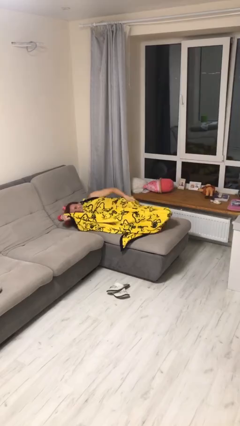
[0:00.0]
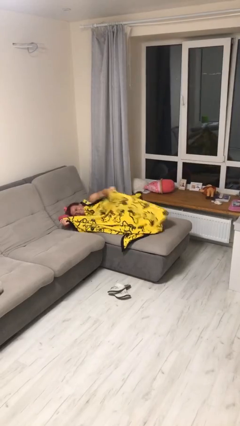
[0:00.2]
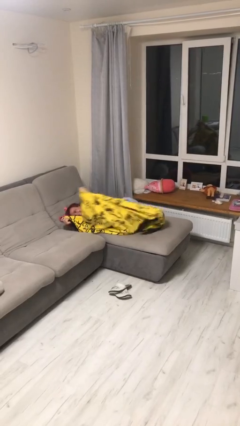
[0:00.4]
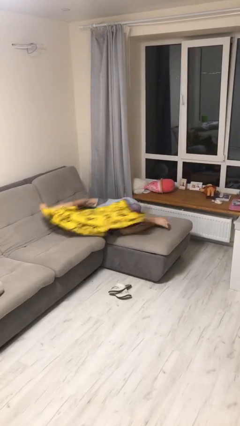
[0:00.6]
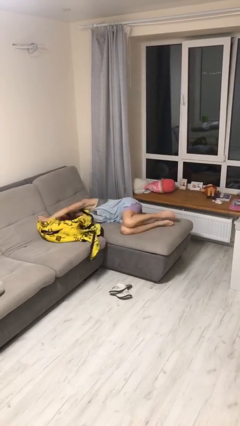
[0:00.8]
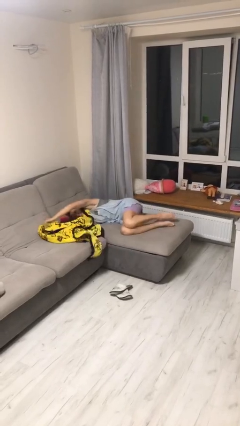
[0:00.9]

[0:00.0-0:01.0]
person uncovers with bedsheets

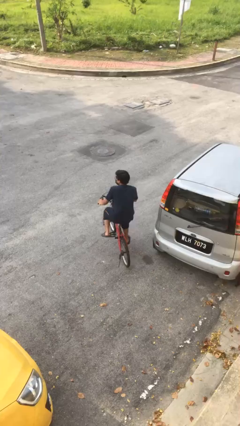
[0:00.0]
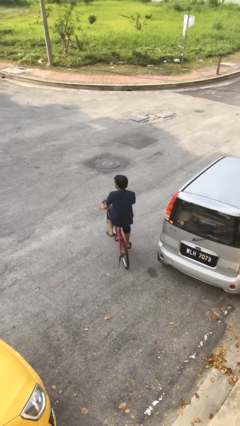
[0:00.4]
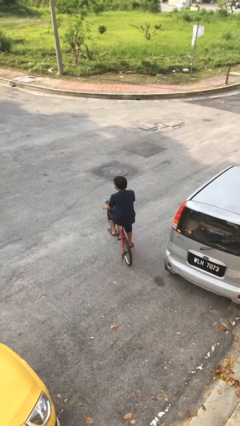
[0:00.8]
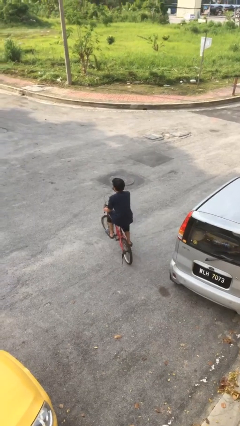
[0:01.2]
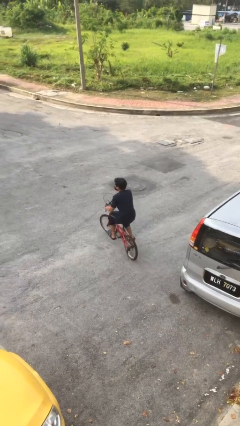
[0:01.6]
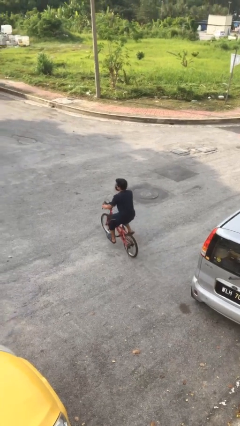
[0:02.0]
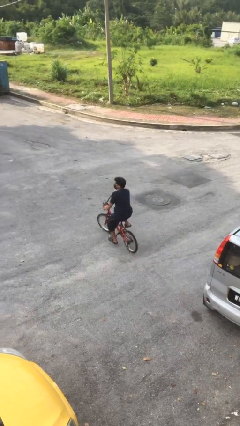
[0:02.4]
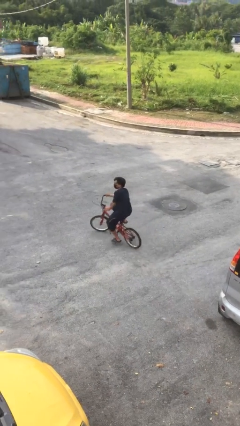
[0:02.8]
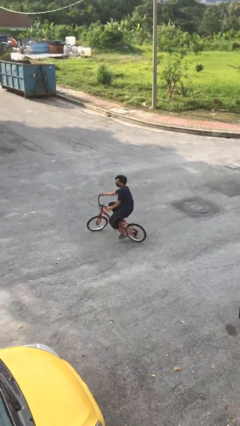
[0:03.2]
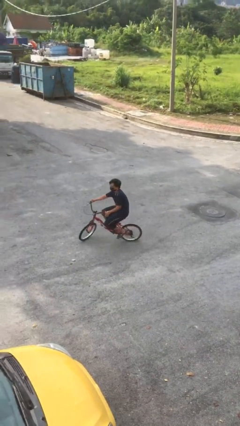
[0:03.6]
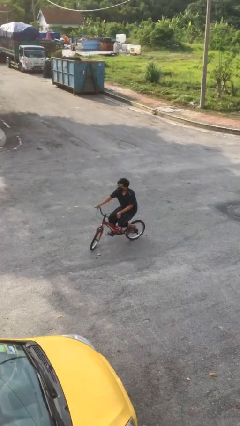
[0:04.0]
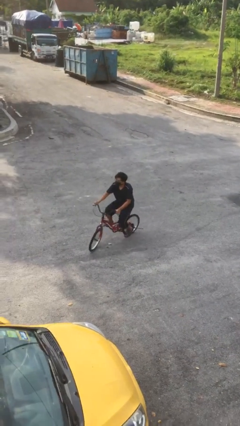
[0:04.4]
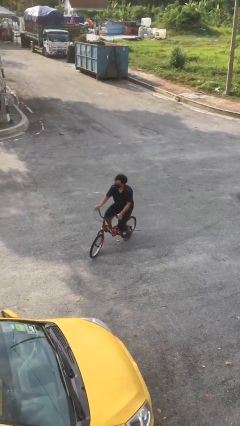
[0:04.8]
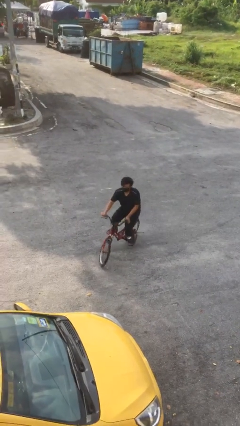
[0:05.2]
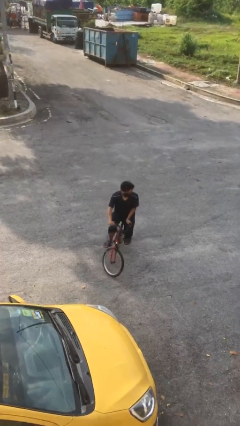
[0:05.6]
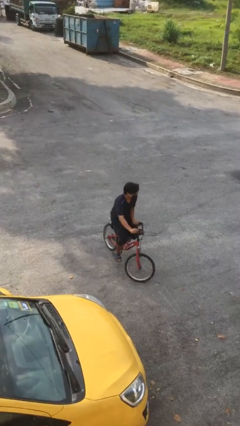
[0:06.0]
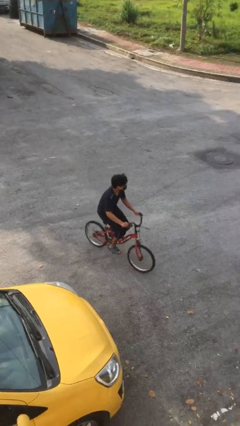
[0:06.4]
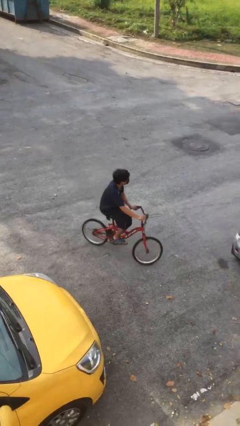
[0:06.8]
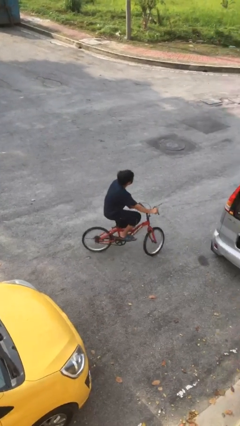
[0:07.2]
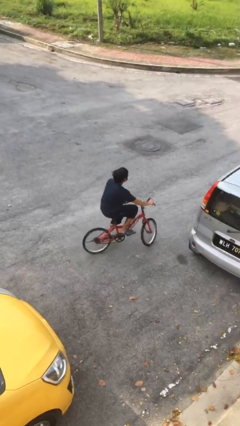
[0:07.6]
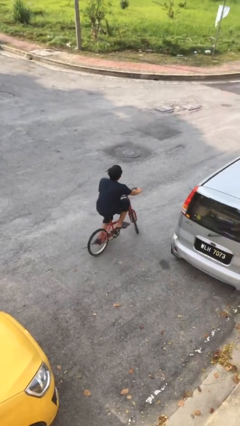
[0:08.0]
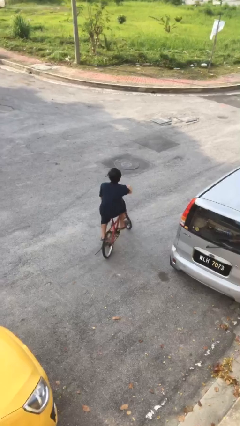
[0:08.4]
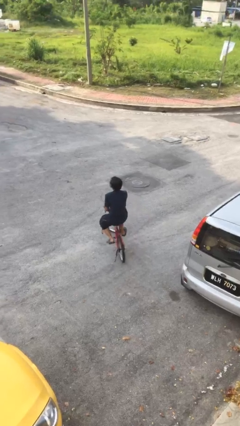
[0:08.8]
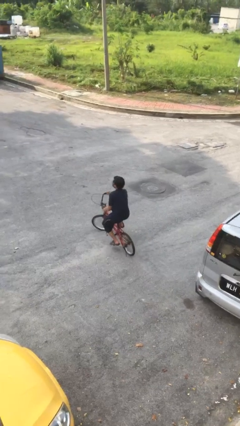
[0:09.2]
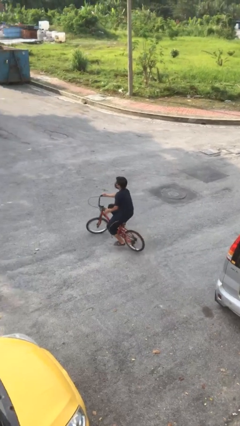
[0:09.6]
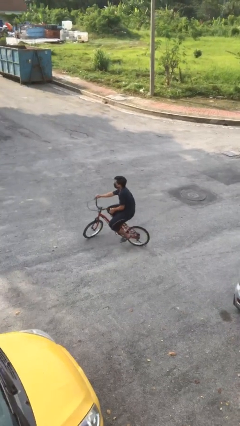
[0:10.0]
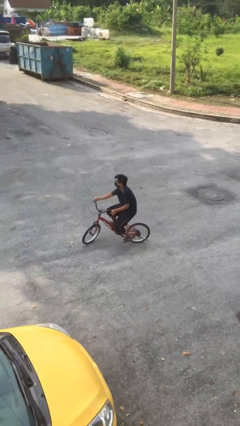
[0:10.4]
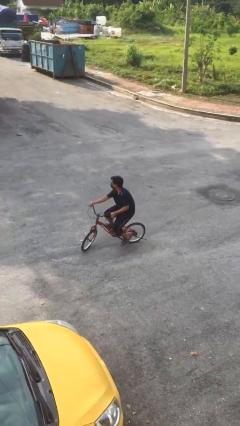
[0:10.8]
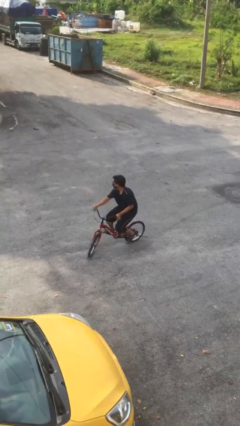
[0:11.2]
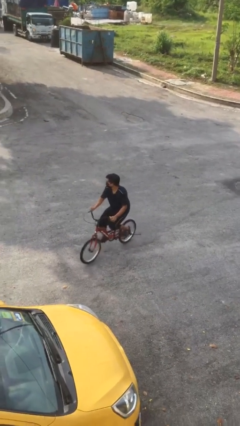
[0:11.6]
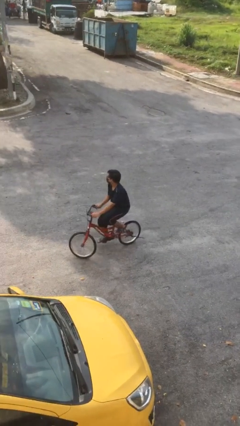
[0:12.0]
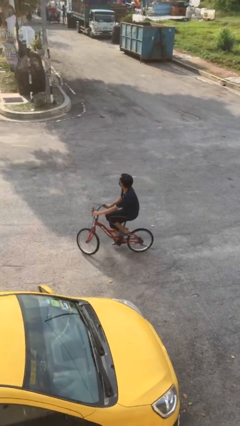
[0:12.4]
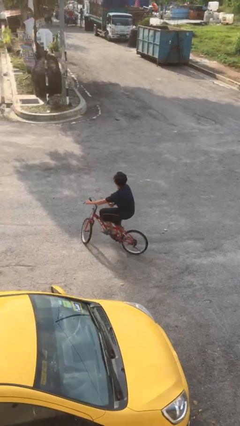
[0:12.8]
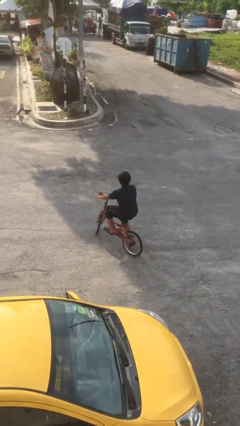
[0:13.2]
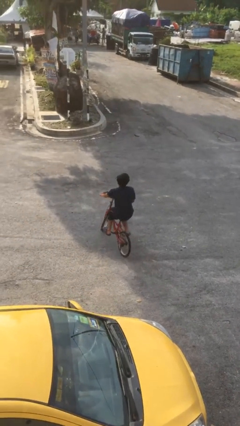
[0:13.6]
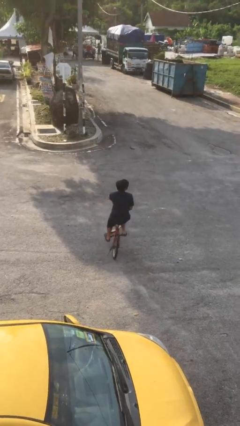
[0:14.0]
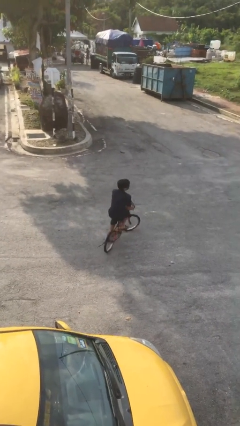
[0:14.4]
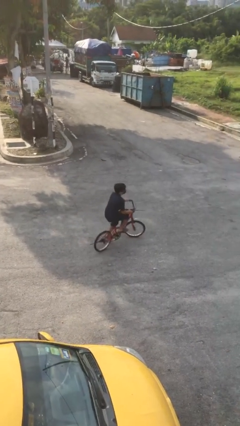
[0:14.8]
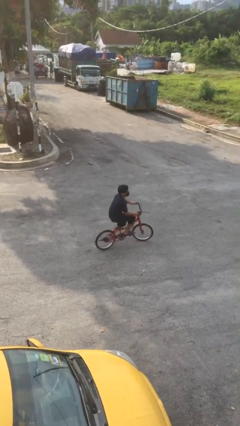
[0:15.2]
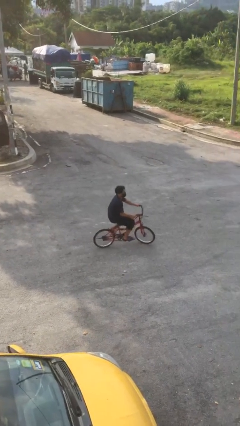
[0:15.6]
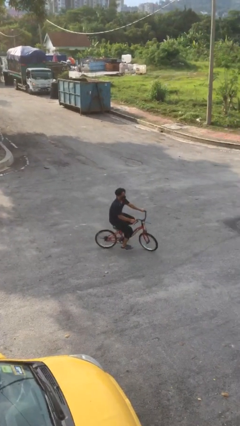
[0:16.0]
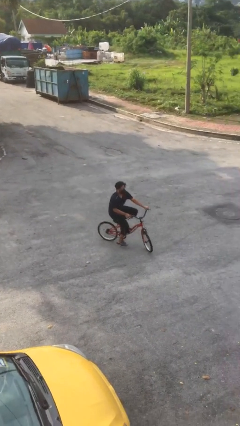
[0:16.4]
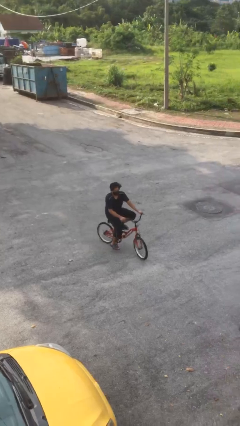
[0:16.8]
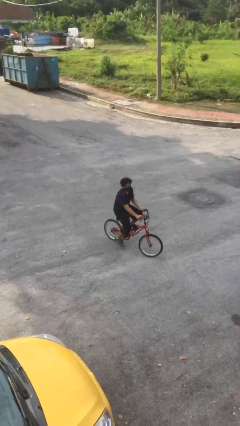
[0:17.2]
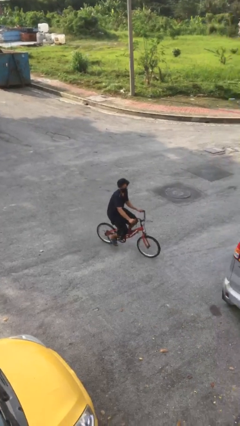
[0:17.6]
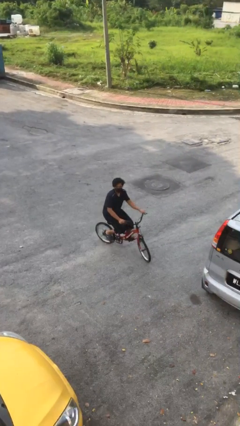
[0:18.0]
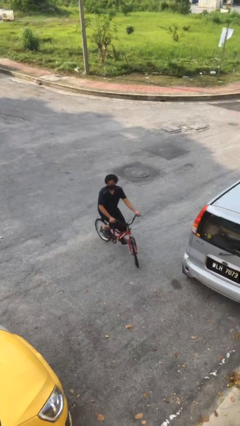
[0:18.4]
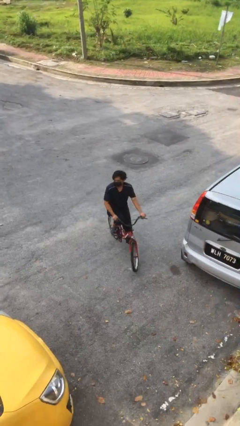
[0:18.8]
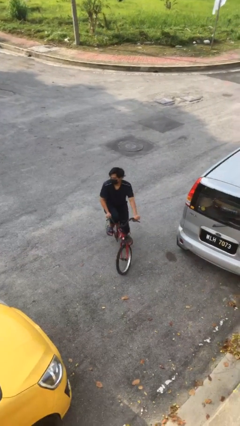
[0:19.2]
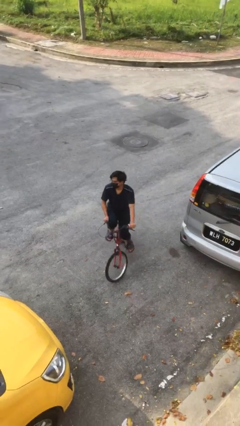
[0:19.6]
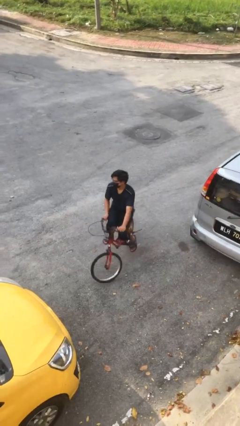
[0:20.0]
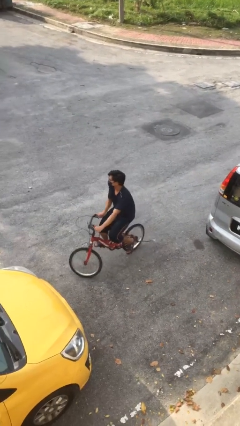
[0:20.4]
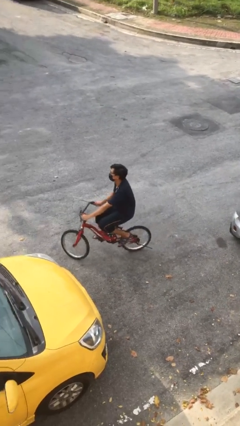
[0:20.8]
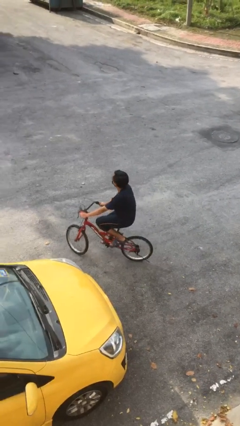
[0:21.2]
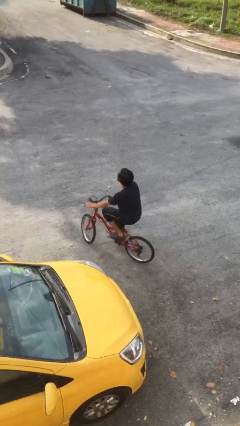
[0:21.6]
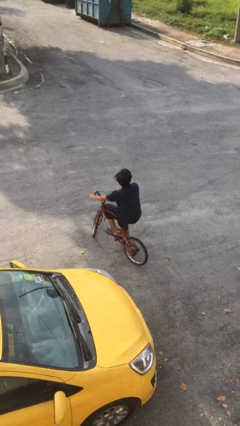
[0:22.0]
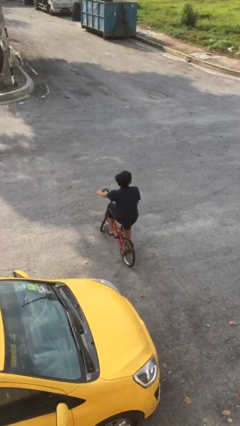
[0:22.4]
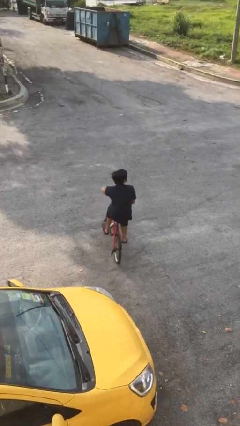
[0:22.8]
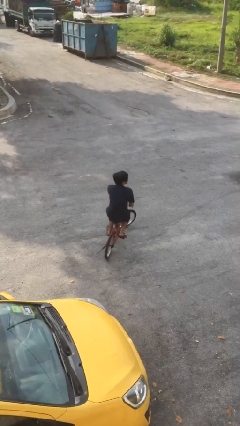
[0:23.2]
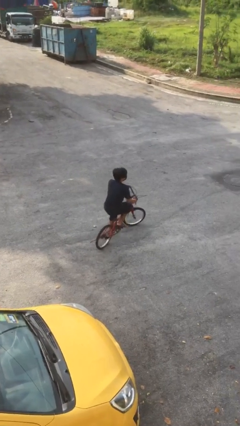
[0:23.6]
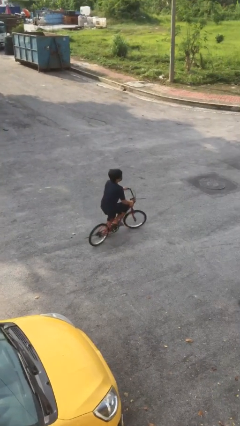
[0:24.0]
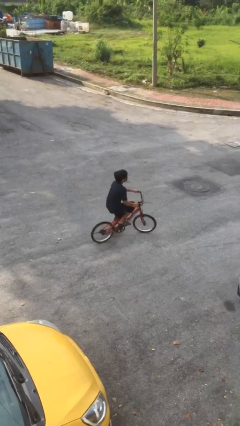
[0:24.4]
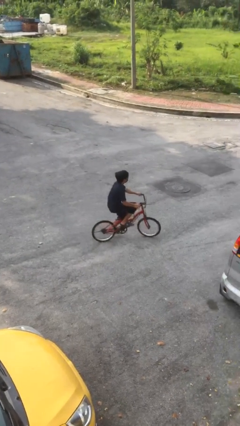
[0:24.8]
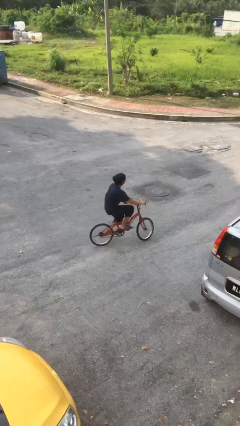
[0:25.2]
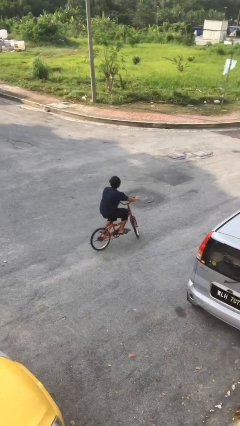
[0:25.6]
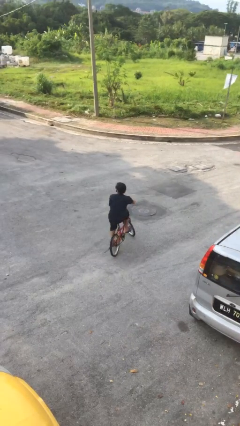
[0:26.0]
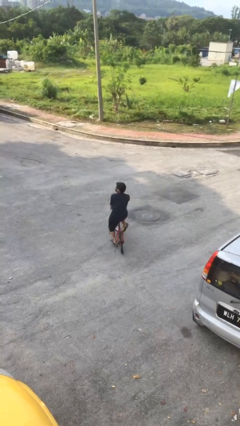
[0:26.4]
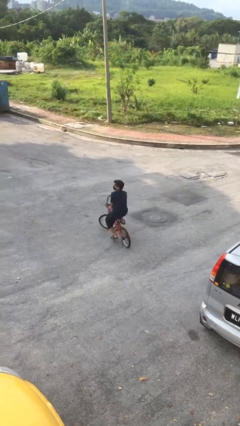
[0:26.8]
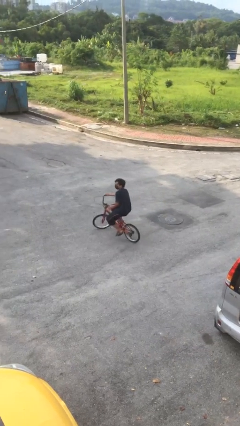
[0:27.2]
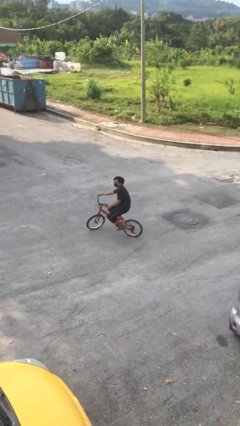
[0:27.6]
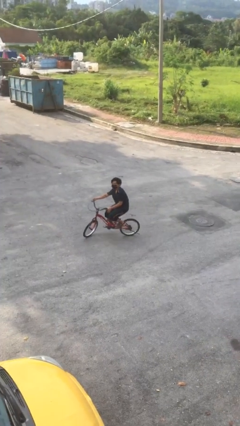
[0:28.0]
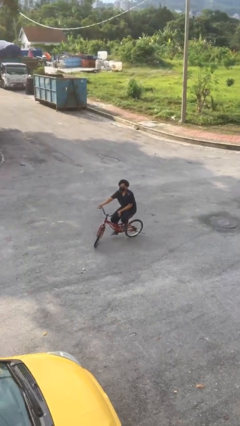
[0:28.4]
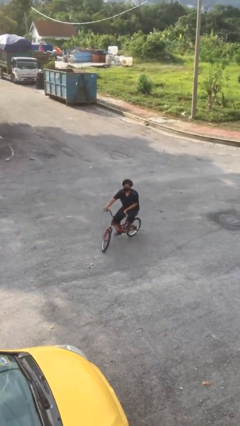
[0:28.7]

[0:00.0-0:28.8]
person rides bicycle

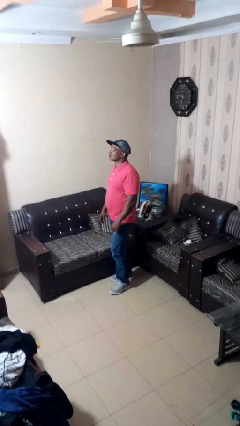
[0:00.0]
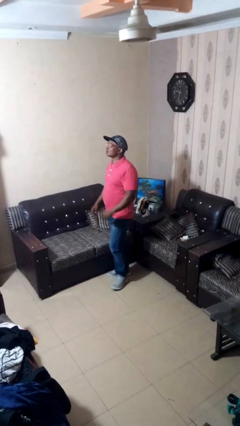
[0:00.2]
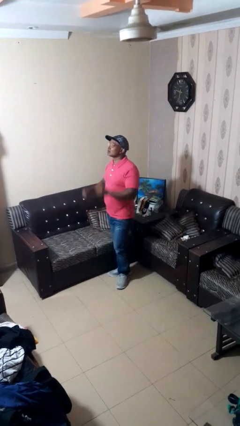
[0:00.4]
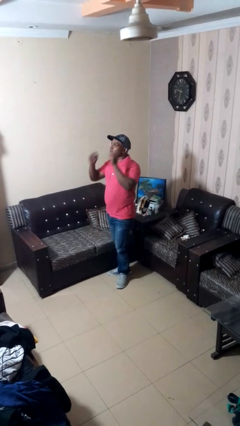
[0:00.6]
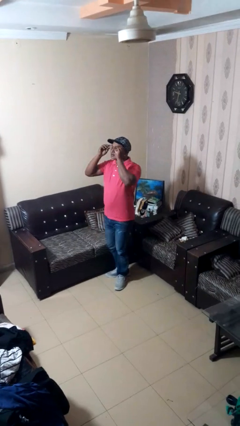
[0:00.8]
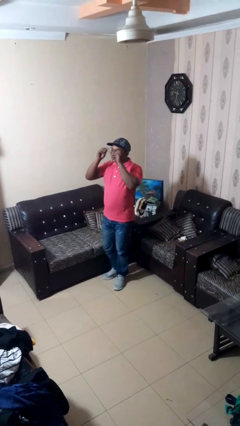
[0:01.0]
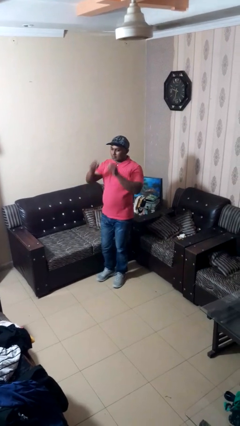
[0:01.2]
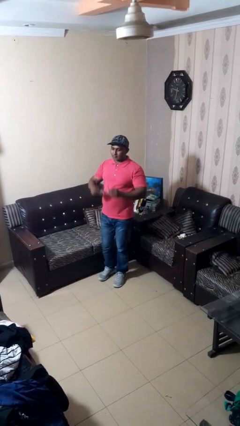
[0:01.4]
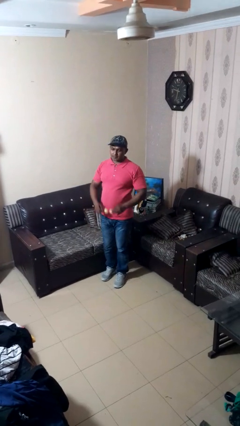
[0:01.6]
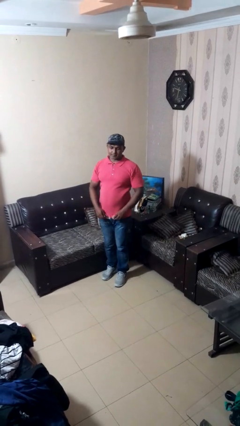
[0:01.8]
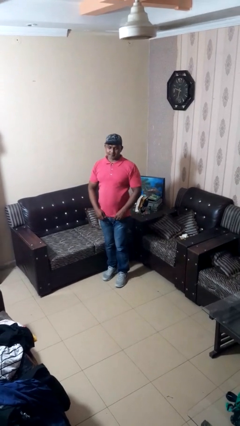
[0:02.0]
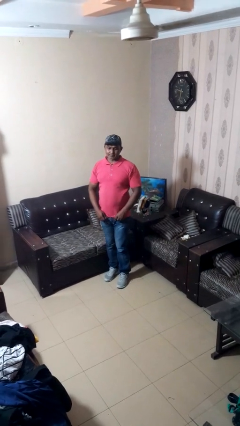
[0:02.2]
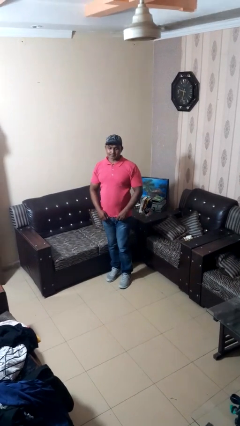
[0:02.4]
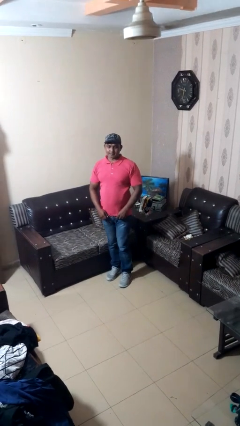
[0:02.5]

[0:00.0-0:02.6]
person takes off glasses
